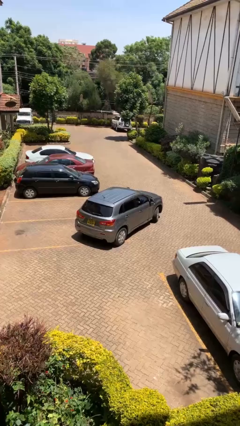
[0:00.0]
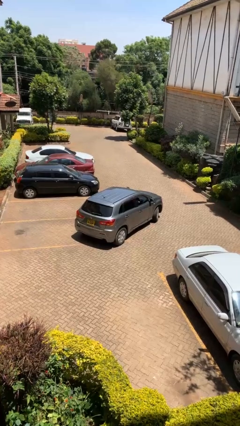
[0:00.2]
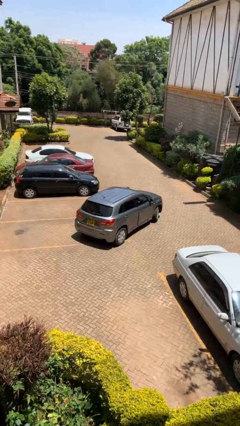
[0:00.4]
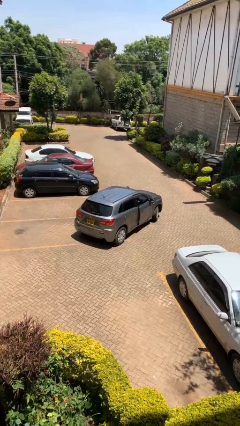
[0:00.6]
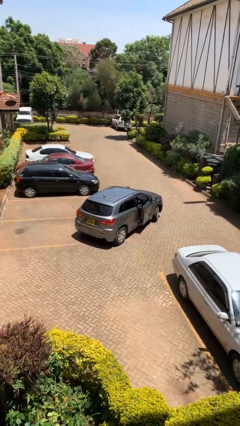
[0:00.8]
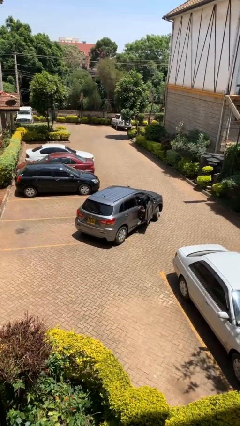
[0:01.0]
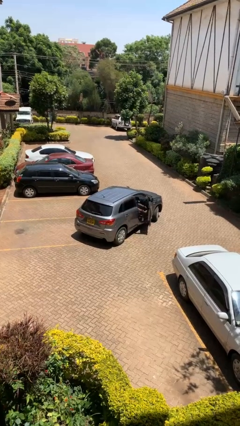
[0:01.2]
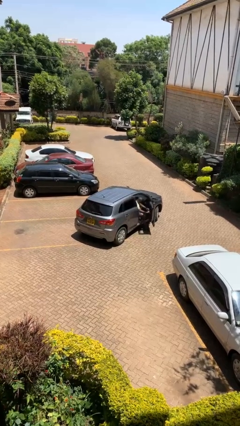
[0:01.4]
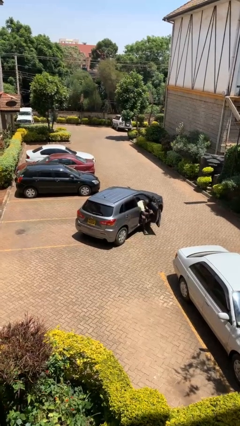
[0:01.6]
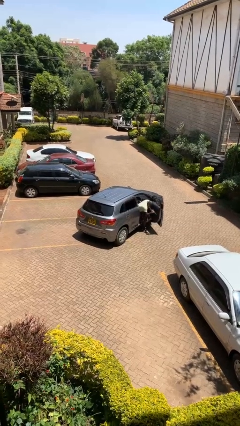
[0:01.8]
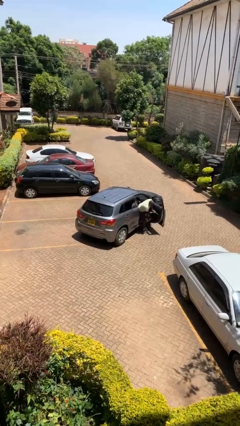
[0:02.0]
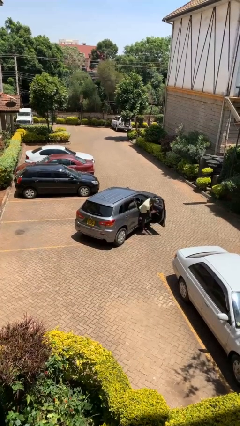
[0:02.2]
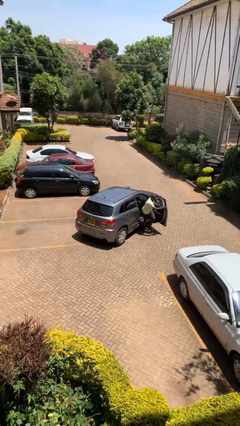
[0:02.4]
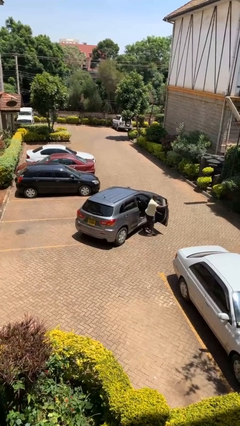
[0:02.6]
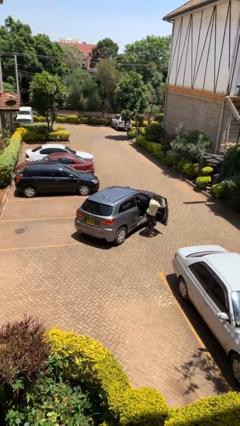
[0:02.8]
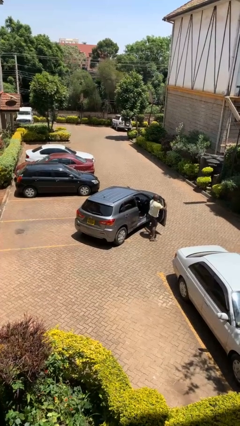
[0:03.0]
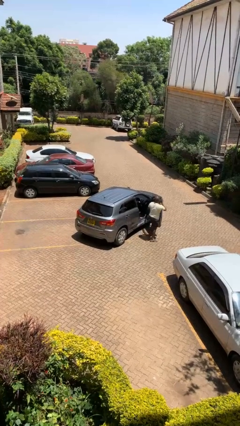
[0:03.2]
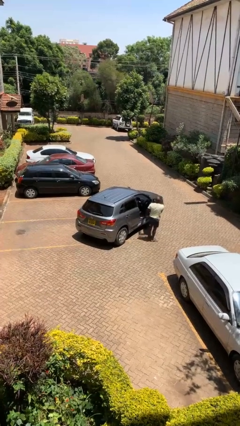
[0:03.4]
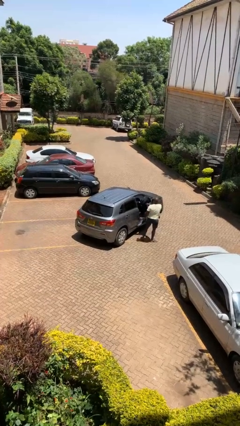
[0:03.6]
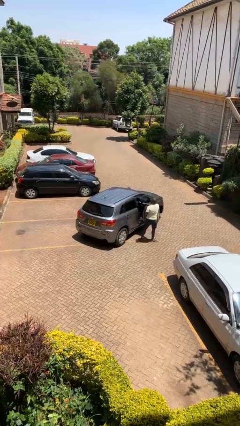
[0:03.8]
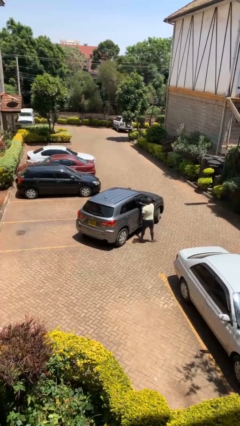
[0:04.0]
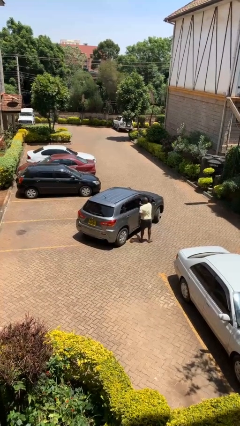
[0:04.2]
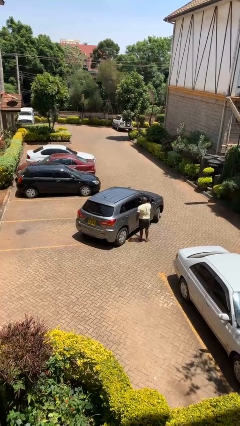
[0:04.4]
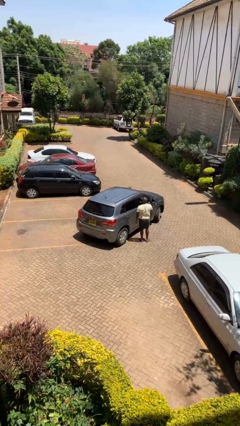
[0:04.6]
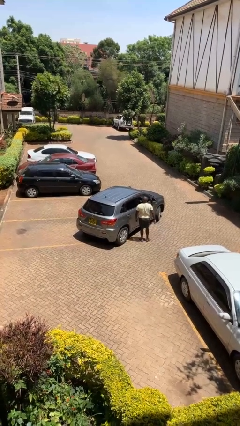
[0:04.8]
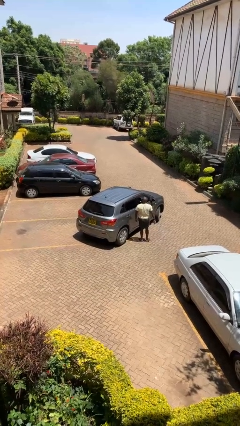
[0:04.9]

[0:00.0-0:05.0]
car drops off person

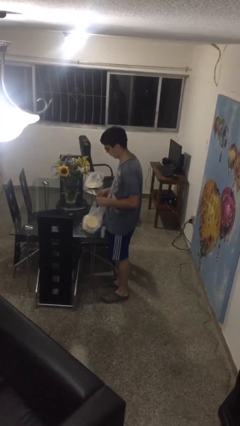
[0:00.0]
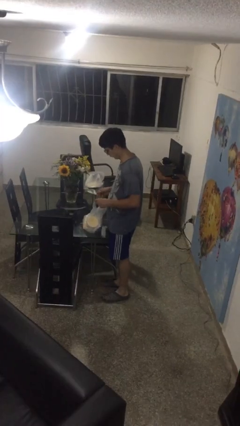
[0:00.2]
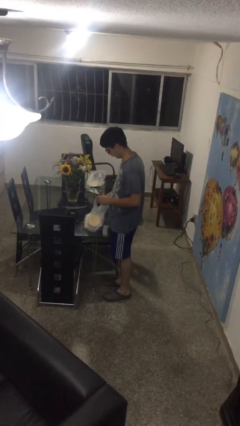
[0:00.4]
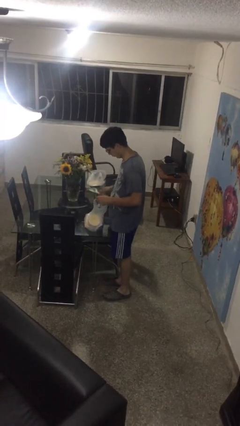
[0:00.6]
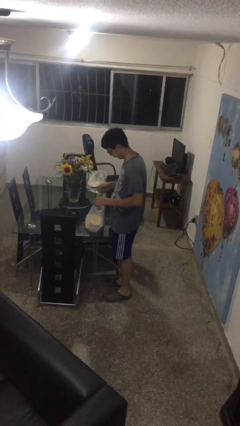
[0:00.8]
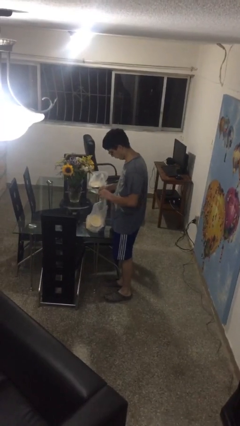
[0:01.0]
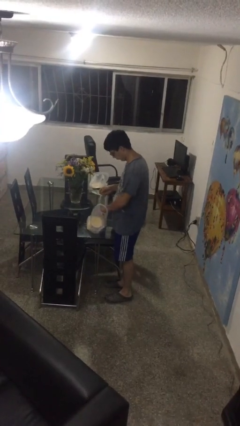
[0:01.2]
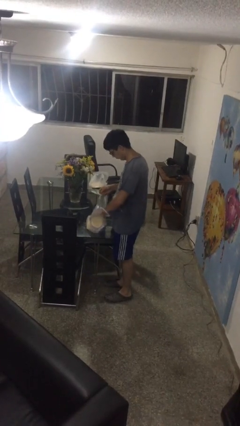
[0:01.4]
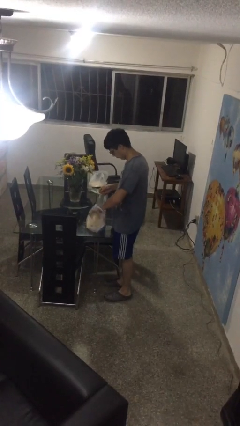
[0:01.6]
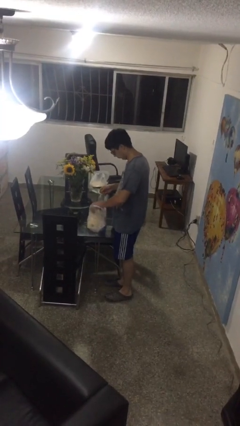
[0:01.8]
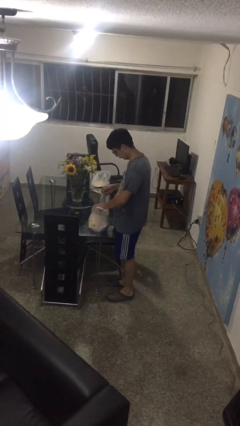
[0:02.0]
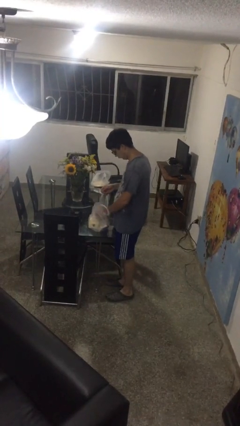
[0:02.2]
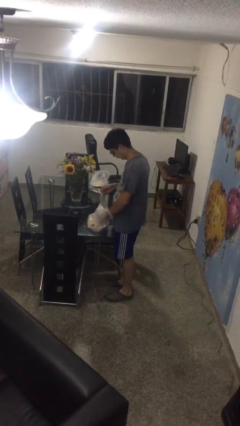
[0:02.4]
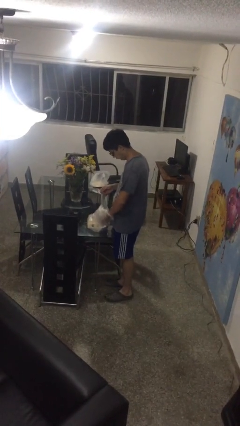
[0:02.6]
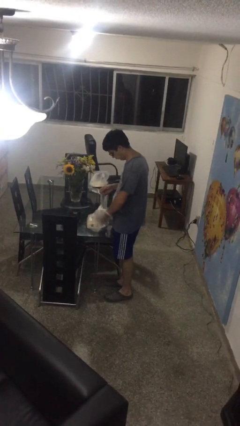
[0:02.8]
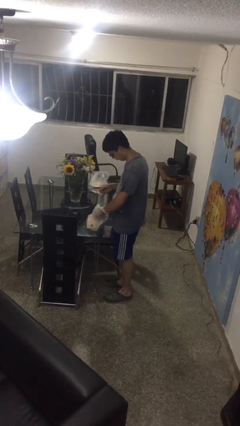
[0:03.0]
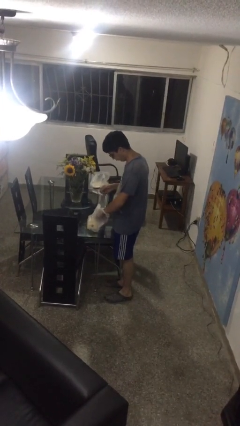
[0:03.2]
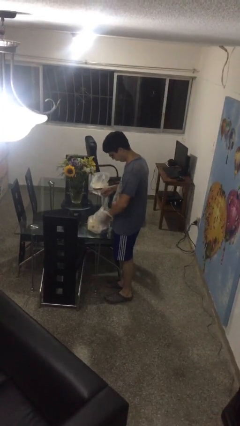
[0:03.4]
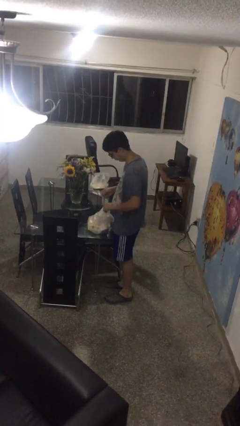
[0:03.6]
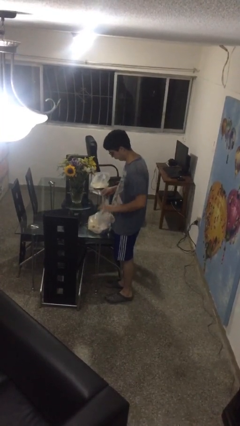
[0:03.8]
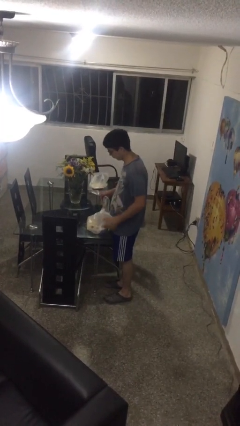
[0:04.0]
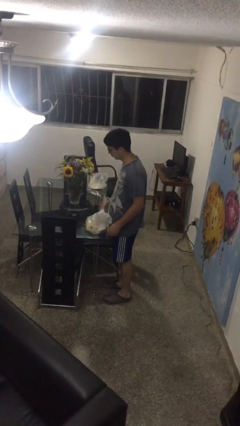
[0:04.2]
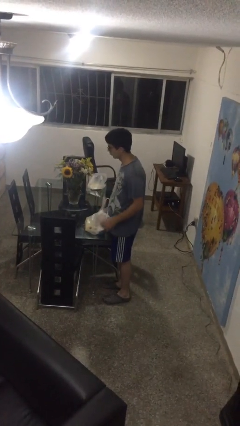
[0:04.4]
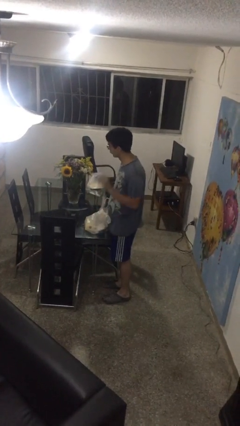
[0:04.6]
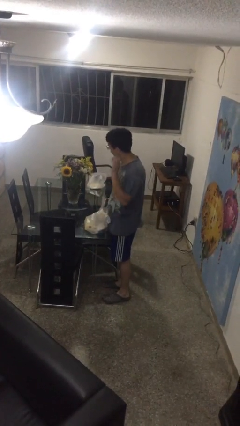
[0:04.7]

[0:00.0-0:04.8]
person searches in bag

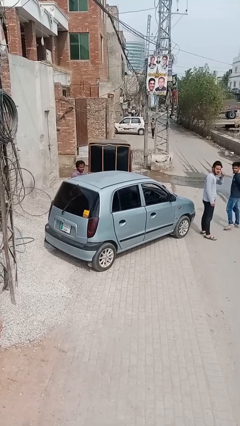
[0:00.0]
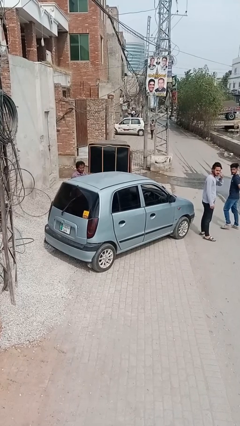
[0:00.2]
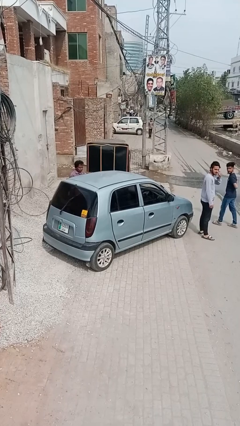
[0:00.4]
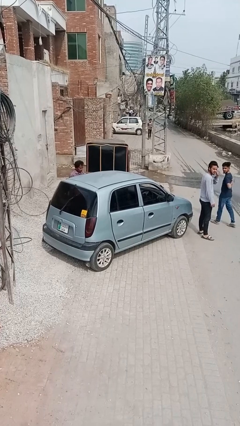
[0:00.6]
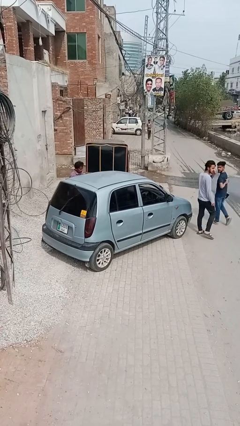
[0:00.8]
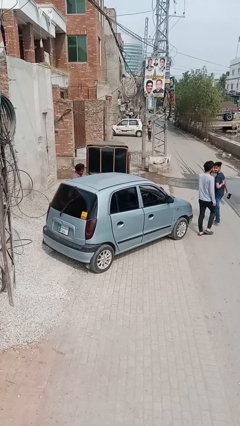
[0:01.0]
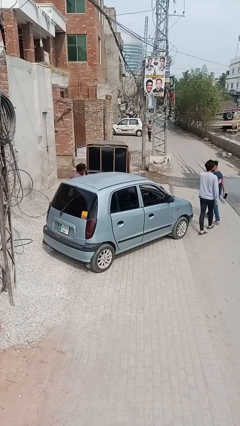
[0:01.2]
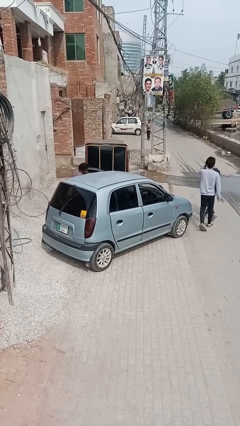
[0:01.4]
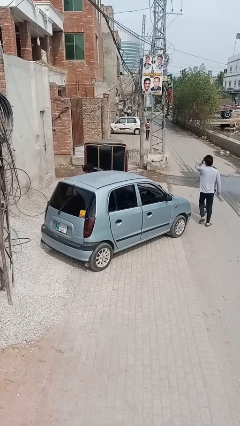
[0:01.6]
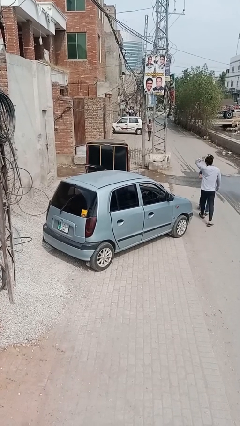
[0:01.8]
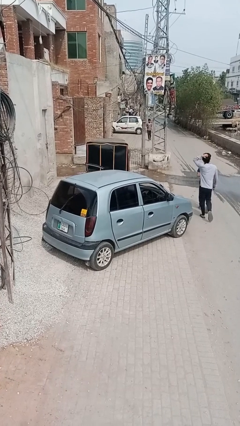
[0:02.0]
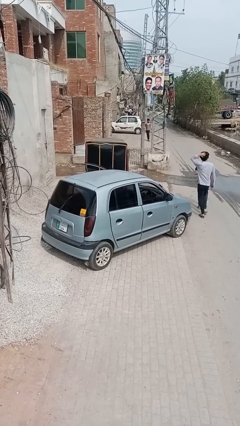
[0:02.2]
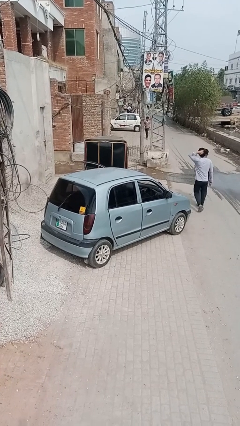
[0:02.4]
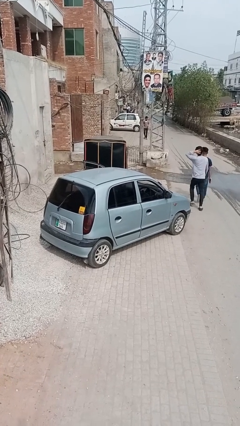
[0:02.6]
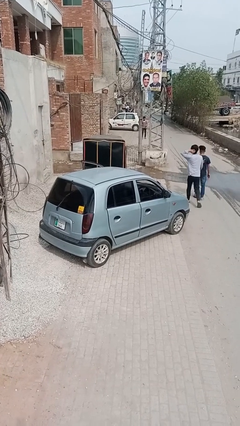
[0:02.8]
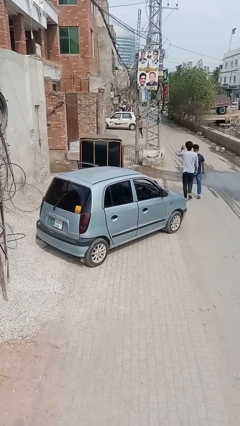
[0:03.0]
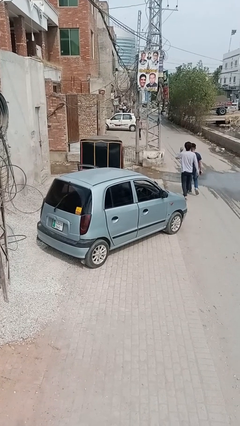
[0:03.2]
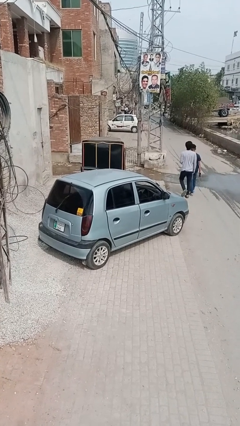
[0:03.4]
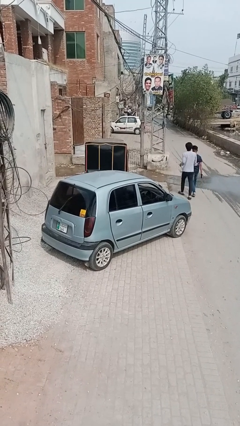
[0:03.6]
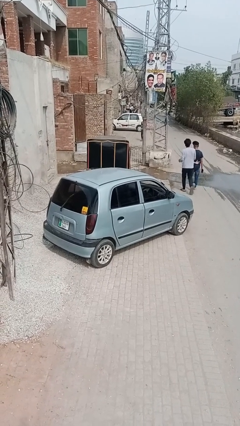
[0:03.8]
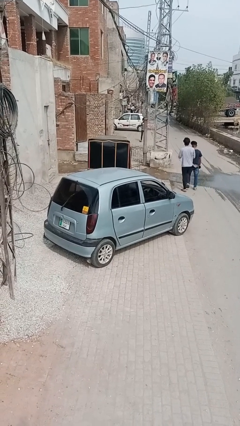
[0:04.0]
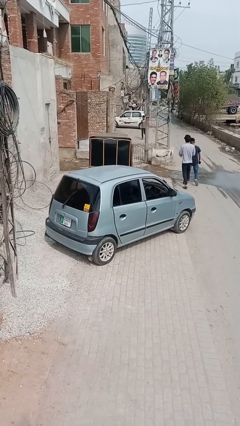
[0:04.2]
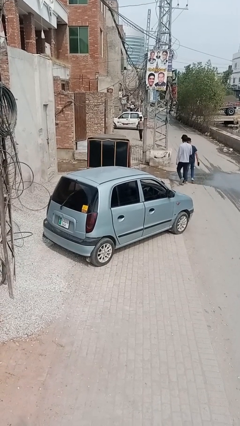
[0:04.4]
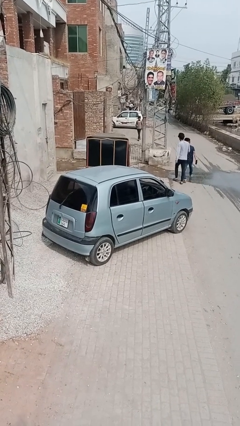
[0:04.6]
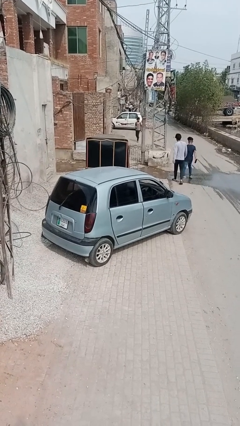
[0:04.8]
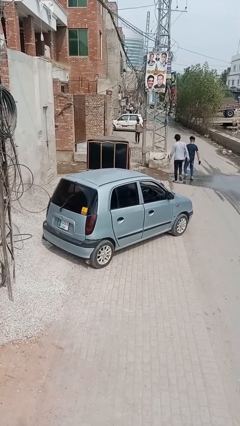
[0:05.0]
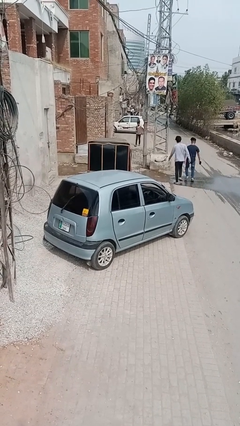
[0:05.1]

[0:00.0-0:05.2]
car picks up person

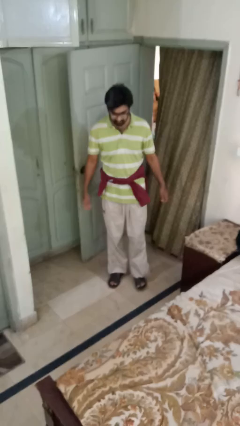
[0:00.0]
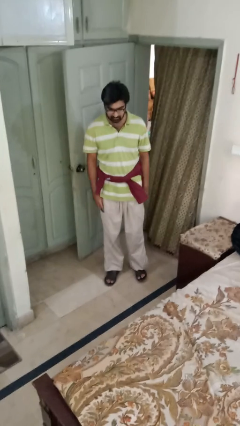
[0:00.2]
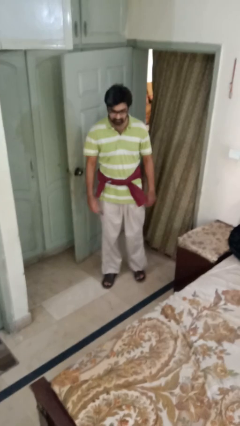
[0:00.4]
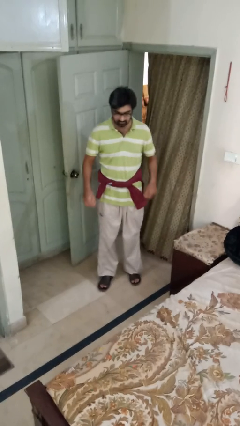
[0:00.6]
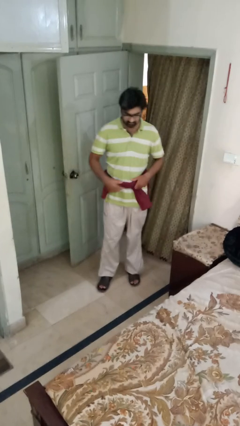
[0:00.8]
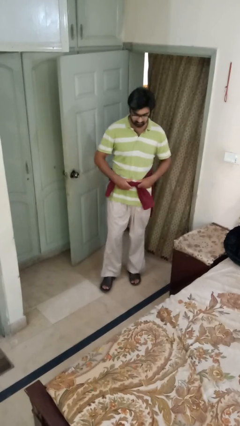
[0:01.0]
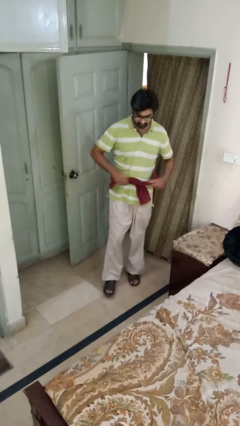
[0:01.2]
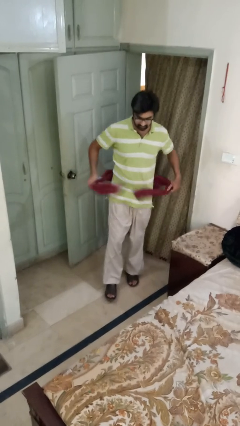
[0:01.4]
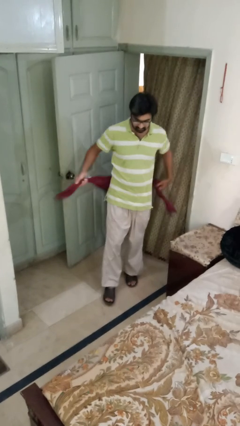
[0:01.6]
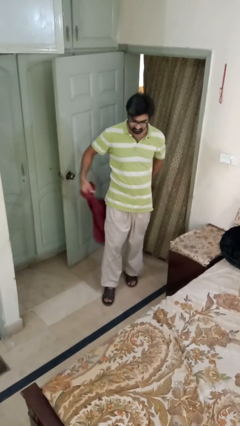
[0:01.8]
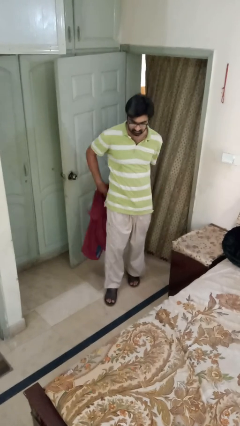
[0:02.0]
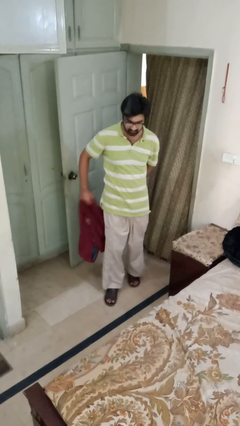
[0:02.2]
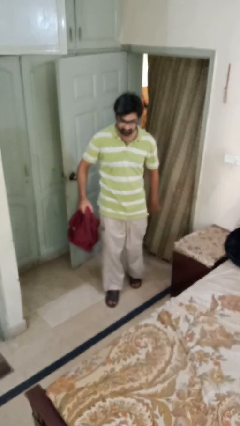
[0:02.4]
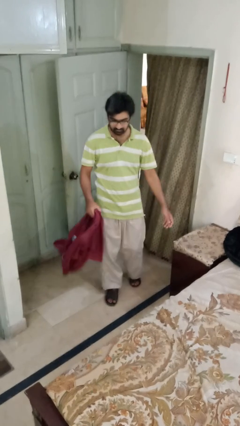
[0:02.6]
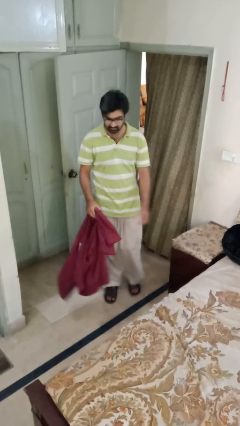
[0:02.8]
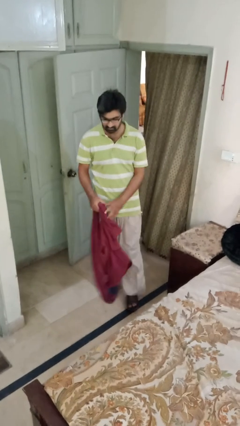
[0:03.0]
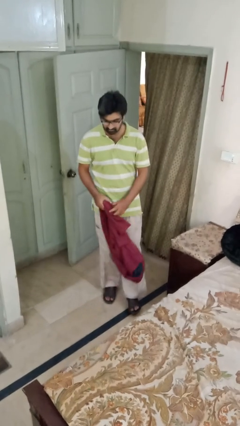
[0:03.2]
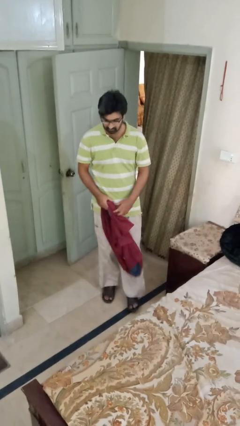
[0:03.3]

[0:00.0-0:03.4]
person unties jacket around waist
